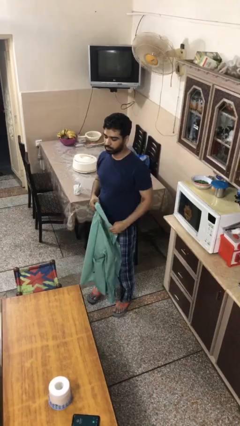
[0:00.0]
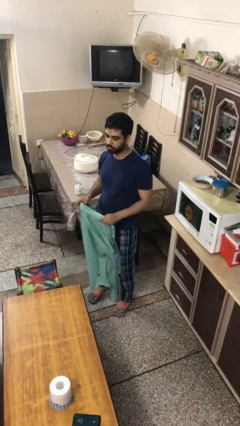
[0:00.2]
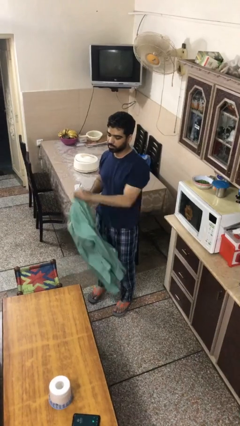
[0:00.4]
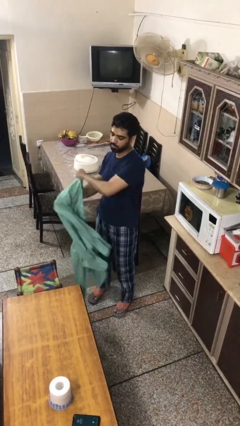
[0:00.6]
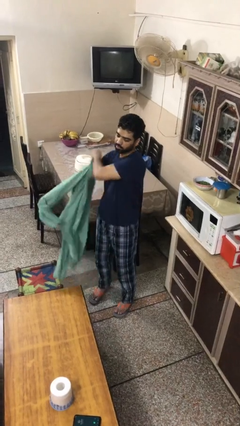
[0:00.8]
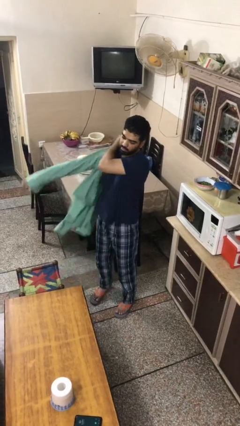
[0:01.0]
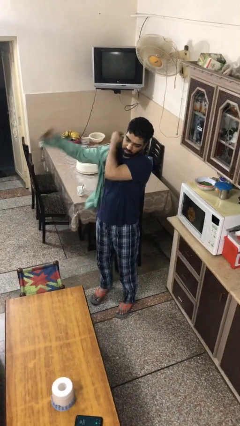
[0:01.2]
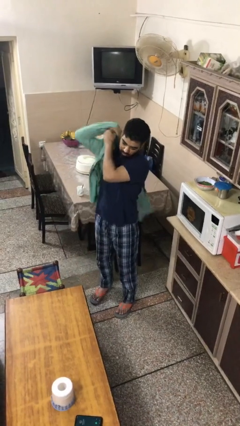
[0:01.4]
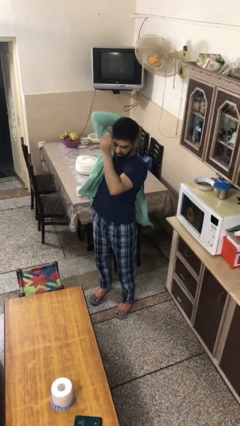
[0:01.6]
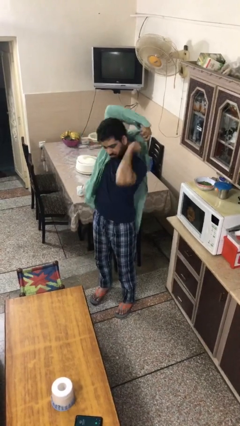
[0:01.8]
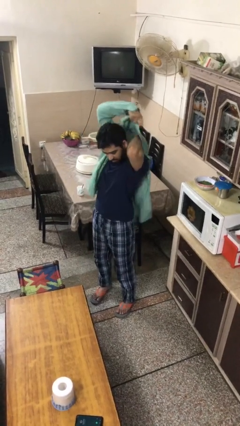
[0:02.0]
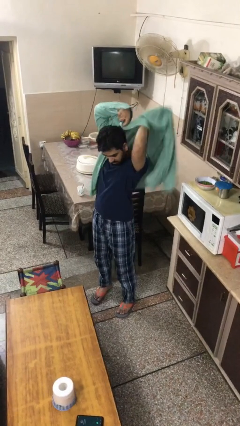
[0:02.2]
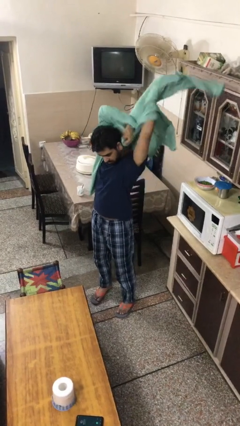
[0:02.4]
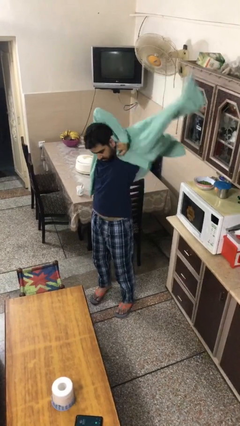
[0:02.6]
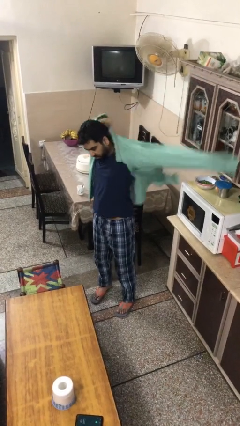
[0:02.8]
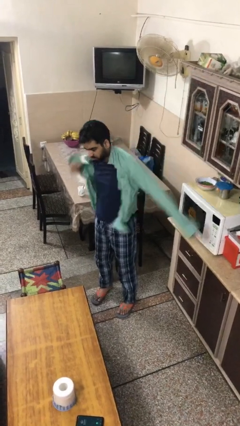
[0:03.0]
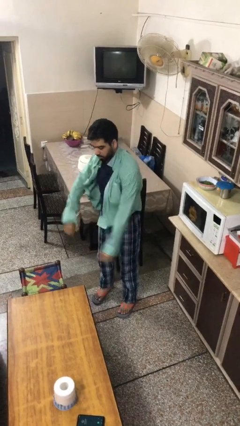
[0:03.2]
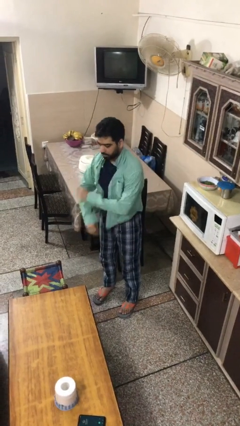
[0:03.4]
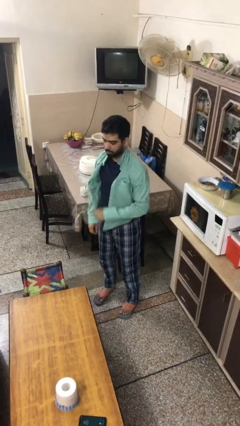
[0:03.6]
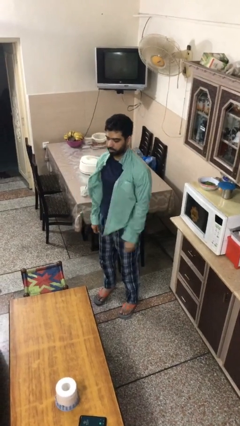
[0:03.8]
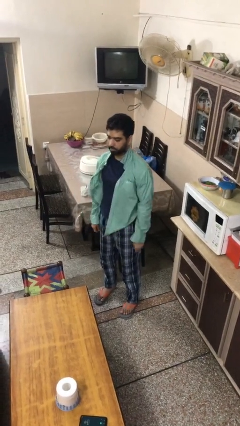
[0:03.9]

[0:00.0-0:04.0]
person puts on shirt

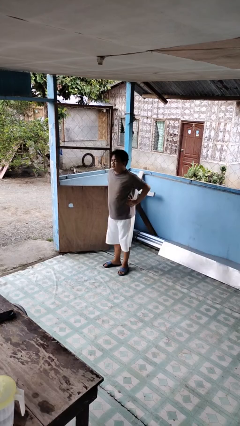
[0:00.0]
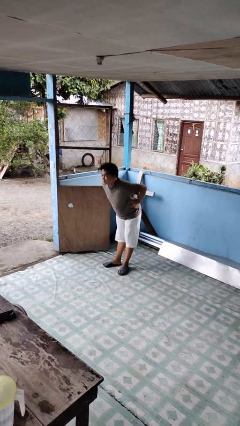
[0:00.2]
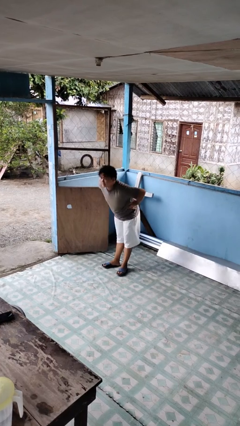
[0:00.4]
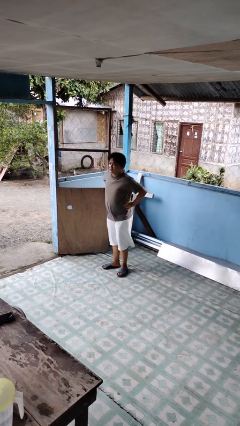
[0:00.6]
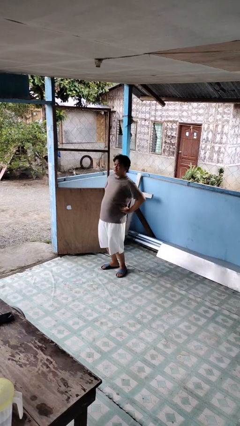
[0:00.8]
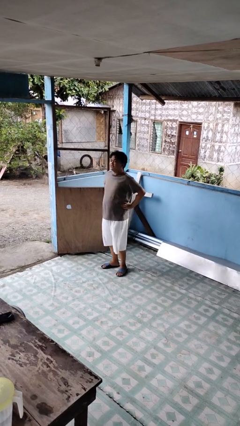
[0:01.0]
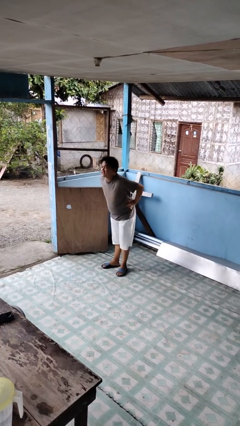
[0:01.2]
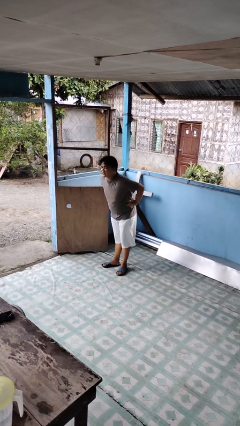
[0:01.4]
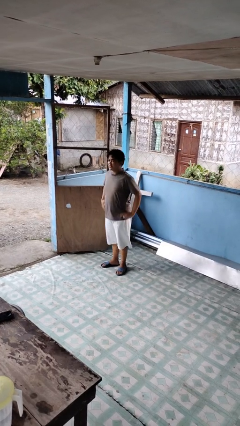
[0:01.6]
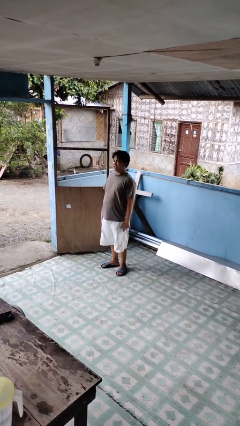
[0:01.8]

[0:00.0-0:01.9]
person wiggles hips

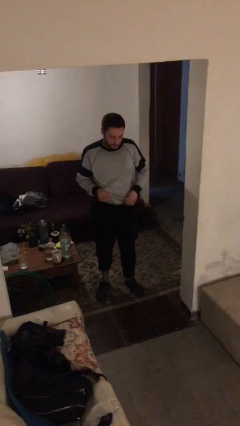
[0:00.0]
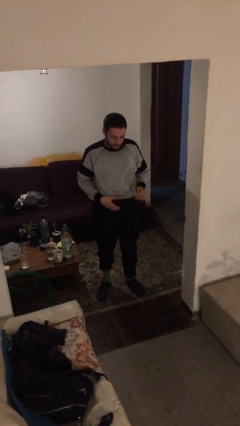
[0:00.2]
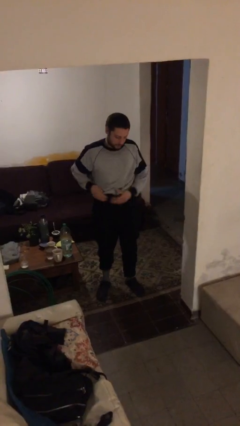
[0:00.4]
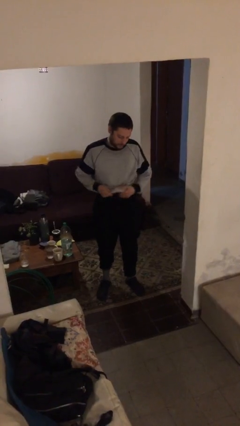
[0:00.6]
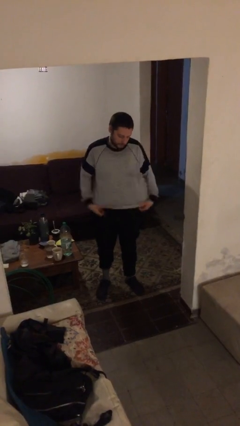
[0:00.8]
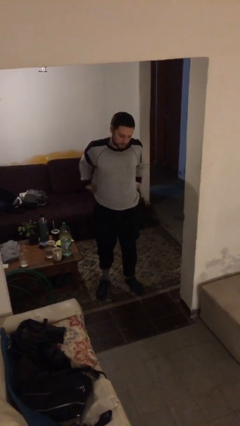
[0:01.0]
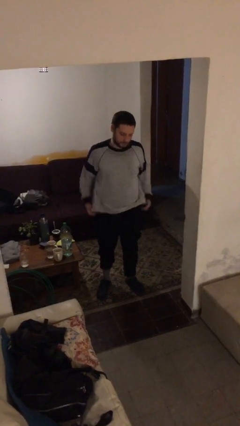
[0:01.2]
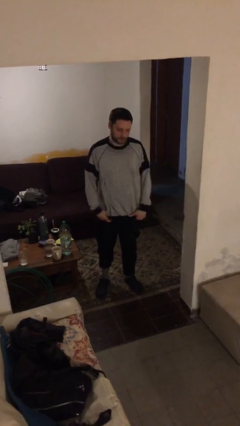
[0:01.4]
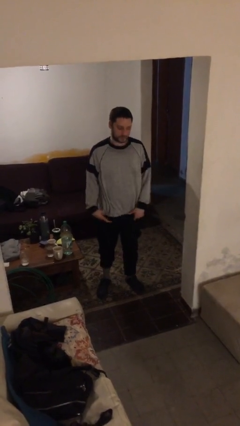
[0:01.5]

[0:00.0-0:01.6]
person untucks shirt

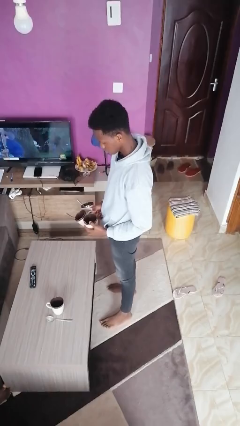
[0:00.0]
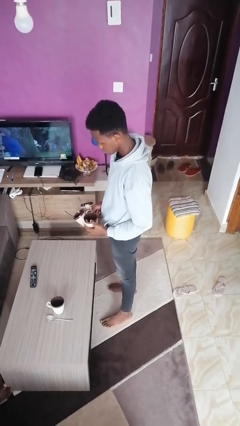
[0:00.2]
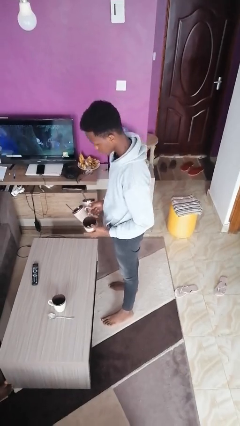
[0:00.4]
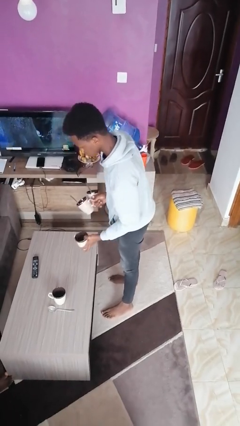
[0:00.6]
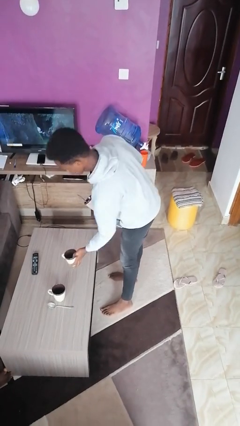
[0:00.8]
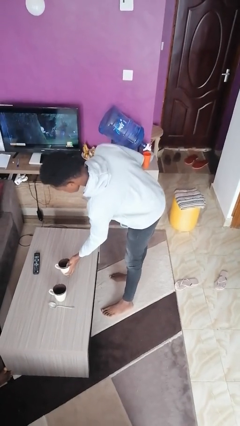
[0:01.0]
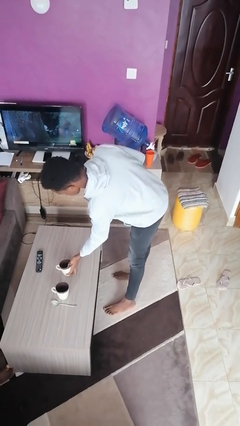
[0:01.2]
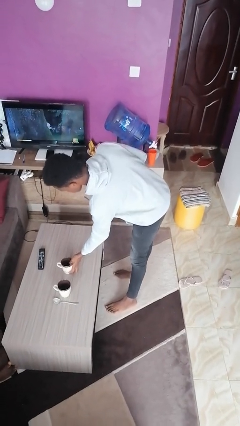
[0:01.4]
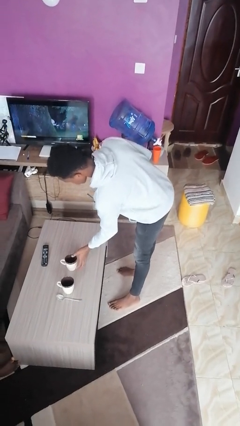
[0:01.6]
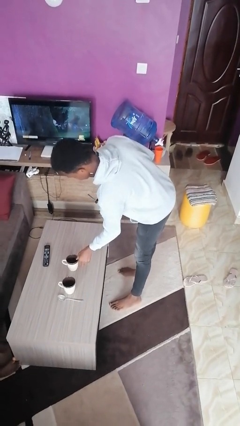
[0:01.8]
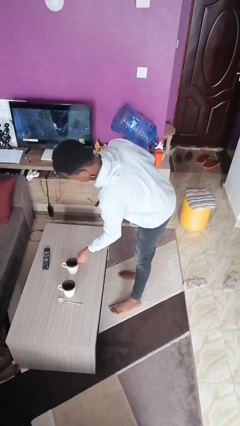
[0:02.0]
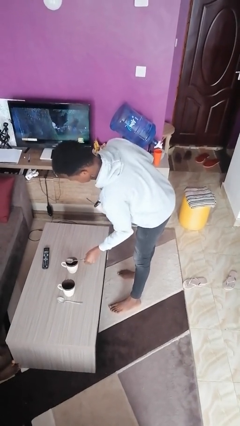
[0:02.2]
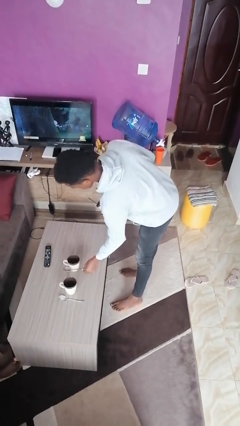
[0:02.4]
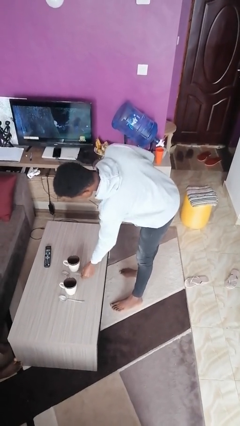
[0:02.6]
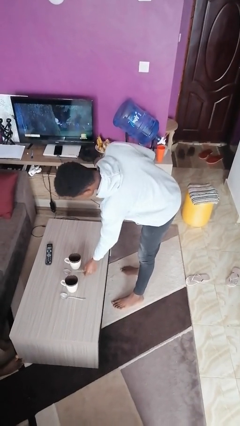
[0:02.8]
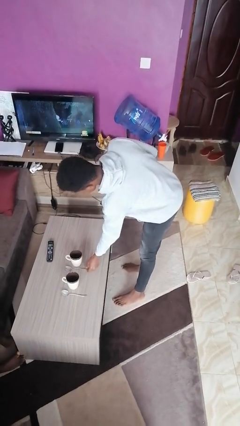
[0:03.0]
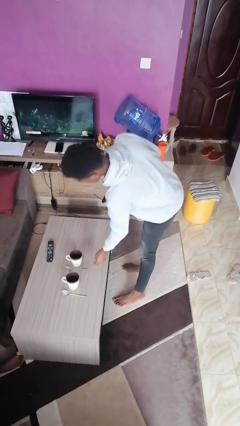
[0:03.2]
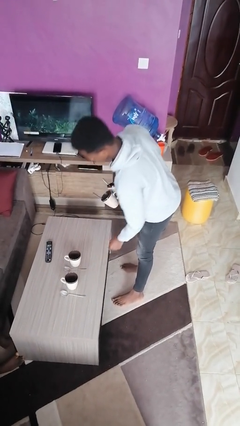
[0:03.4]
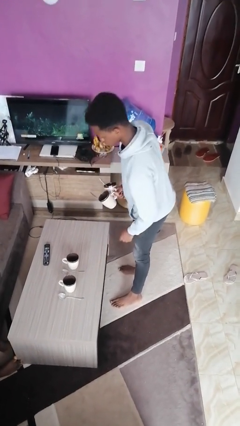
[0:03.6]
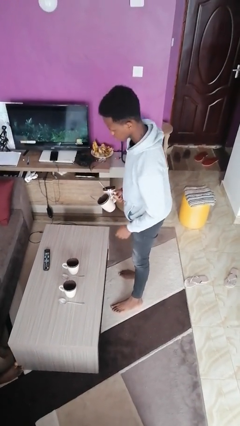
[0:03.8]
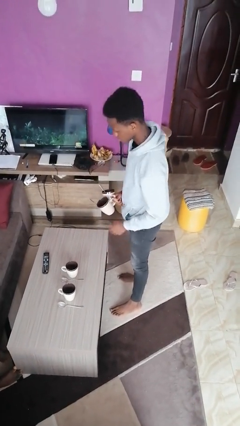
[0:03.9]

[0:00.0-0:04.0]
person sets table

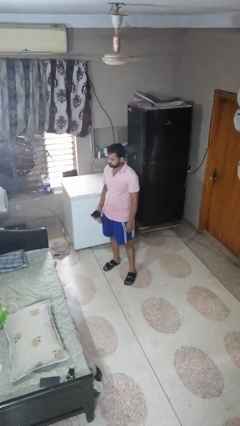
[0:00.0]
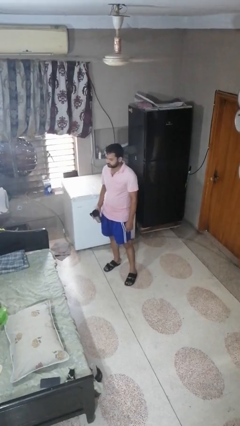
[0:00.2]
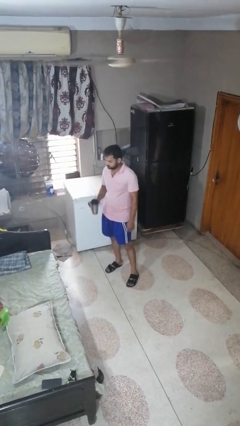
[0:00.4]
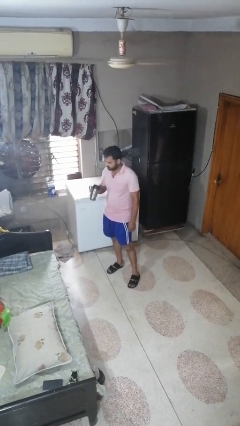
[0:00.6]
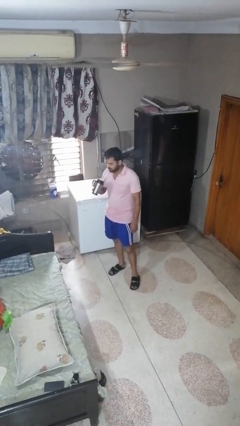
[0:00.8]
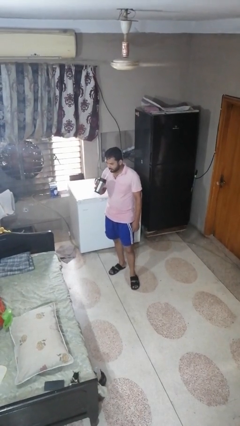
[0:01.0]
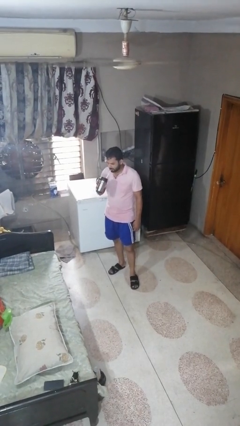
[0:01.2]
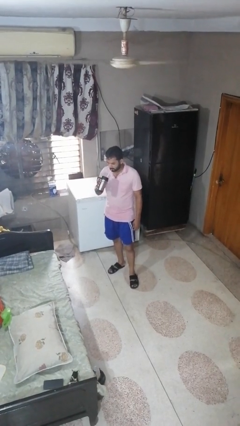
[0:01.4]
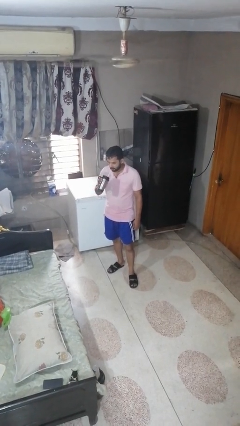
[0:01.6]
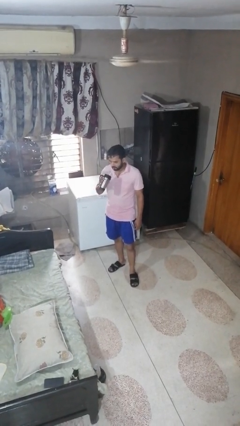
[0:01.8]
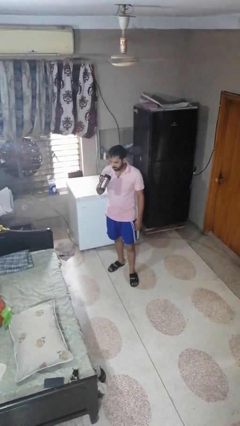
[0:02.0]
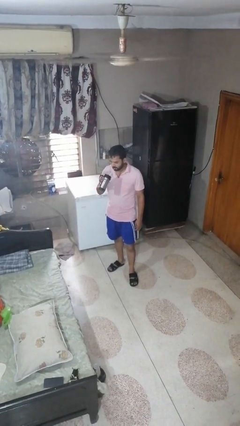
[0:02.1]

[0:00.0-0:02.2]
person drinks from straw

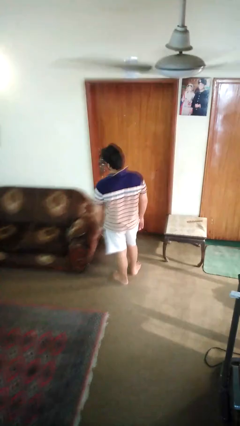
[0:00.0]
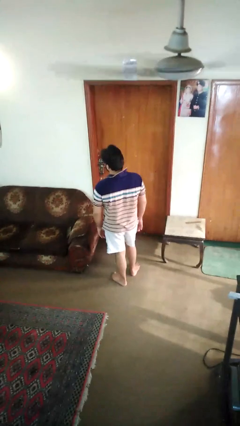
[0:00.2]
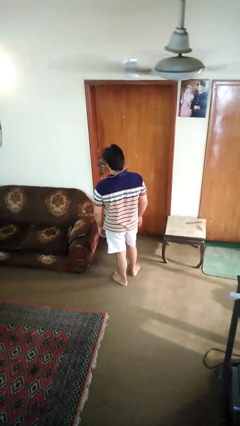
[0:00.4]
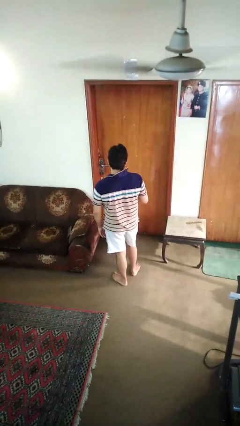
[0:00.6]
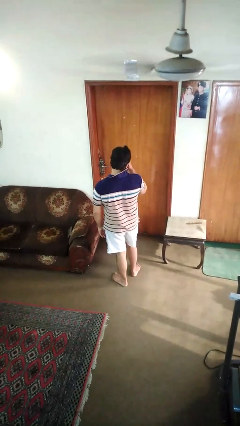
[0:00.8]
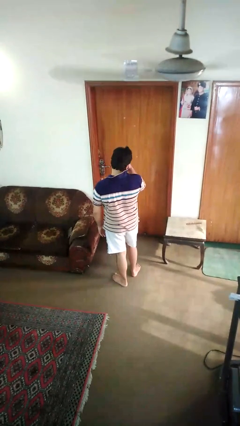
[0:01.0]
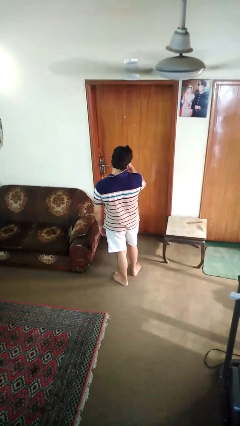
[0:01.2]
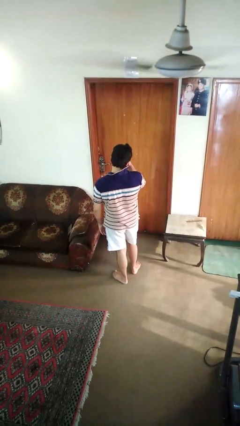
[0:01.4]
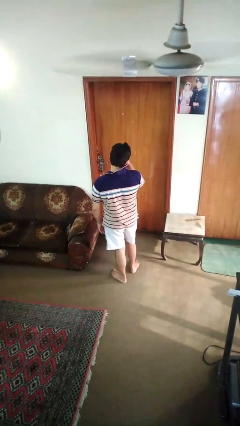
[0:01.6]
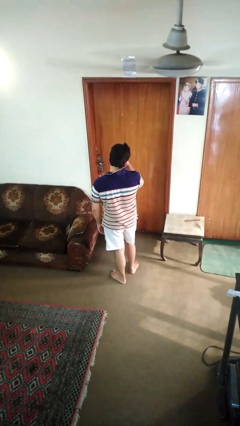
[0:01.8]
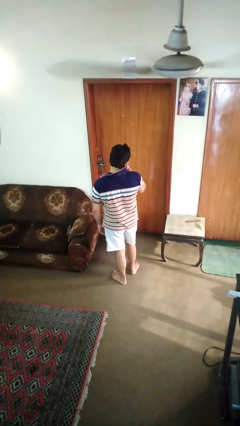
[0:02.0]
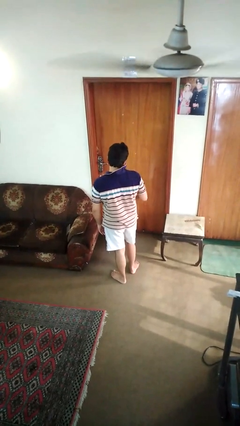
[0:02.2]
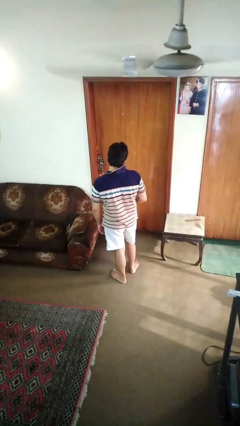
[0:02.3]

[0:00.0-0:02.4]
person rubs eyes

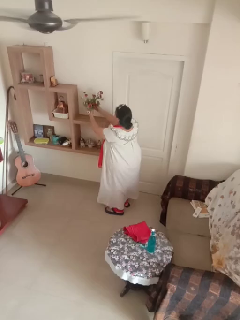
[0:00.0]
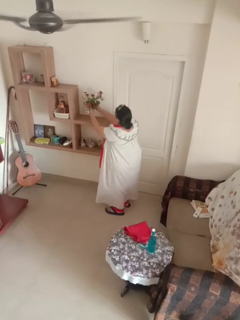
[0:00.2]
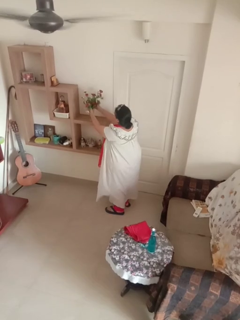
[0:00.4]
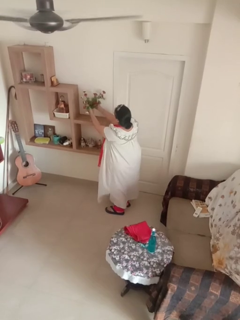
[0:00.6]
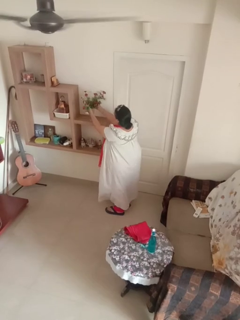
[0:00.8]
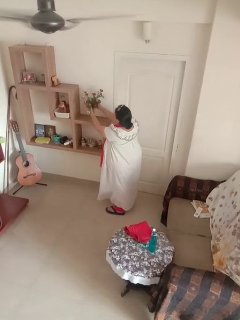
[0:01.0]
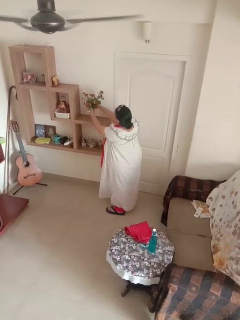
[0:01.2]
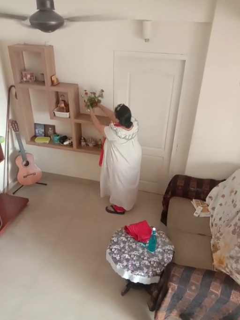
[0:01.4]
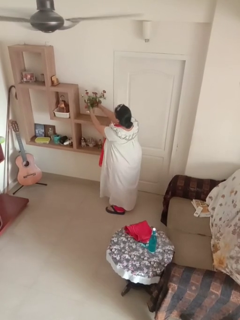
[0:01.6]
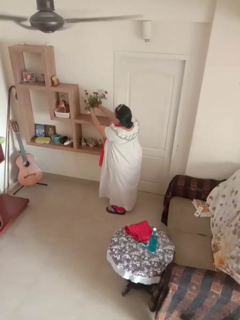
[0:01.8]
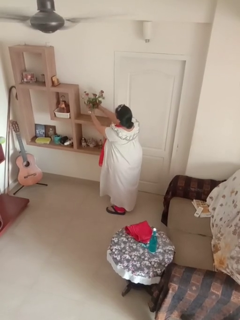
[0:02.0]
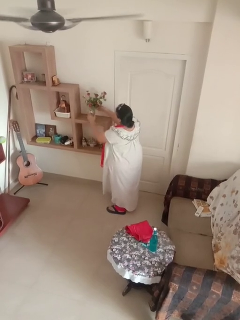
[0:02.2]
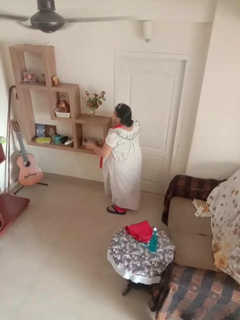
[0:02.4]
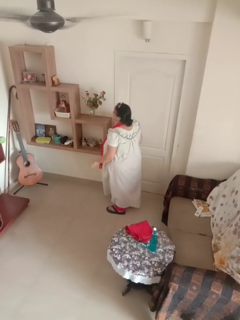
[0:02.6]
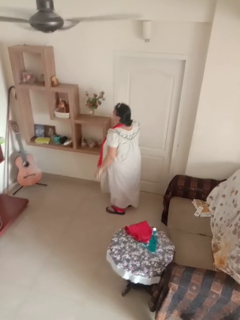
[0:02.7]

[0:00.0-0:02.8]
person arranges flowers in vase
